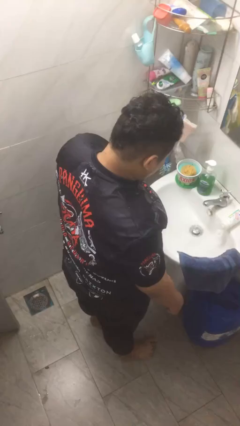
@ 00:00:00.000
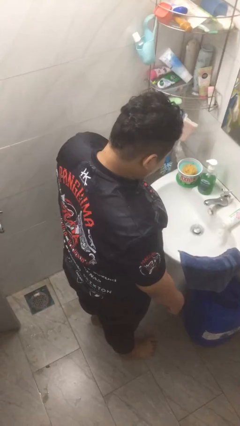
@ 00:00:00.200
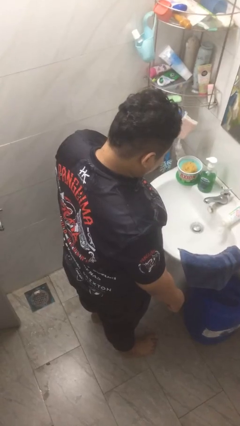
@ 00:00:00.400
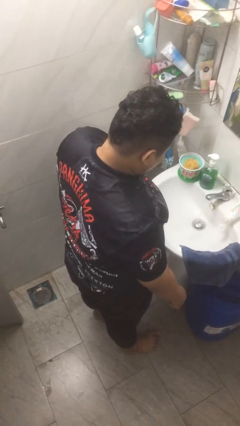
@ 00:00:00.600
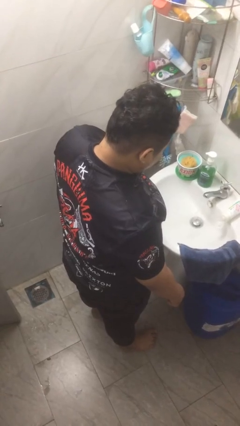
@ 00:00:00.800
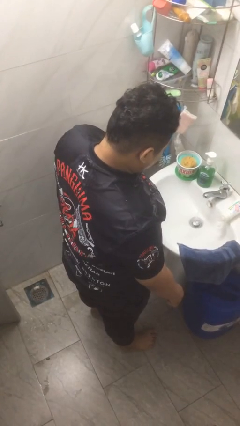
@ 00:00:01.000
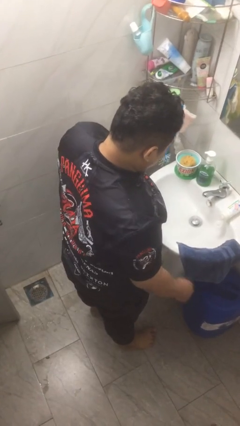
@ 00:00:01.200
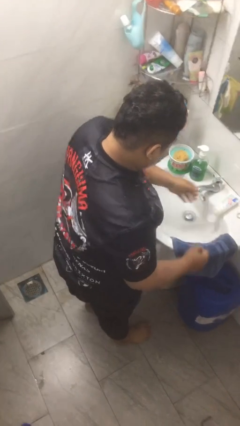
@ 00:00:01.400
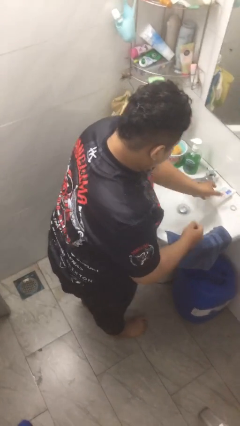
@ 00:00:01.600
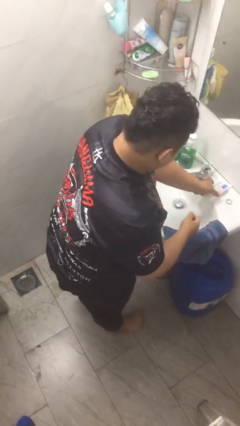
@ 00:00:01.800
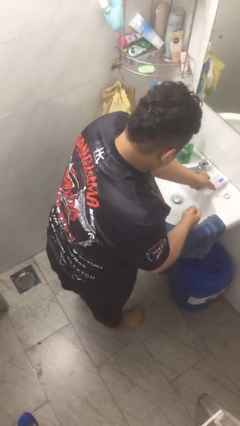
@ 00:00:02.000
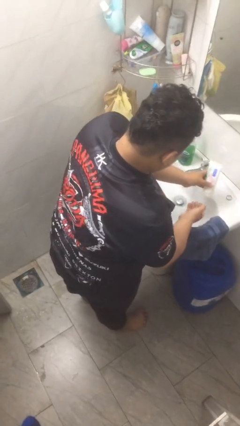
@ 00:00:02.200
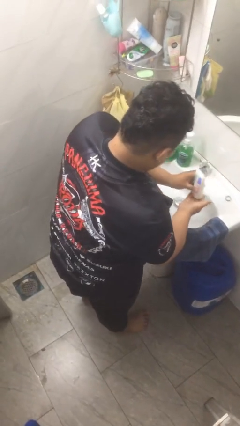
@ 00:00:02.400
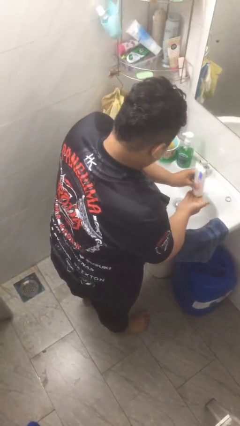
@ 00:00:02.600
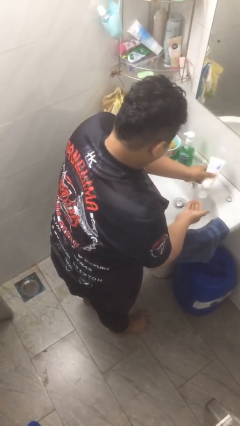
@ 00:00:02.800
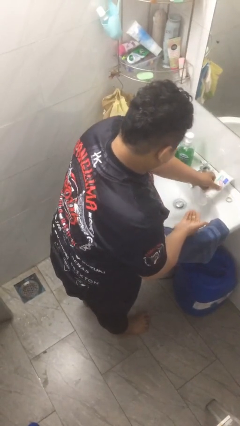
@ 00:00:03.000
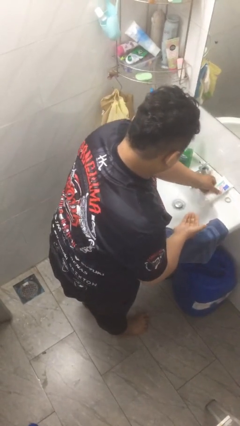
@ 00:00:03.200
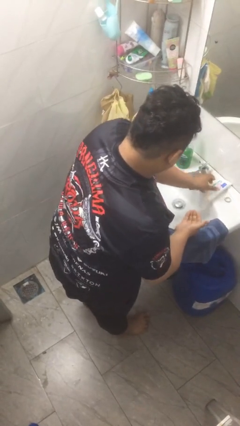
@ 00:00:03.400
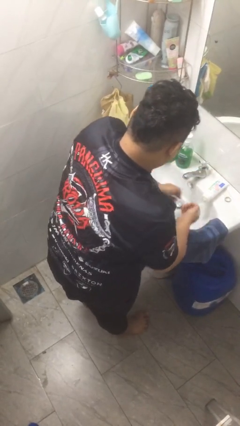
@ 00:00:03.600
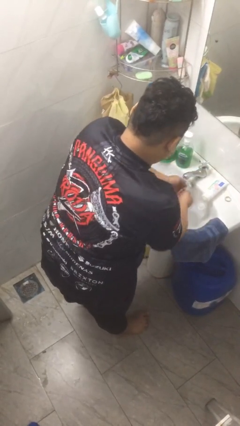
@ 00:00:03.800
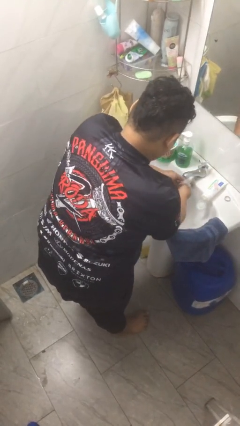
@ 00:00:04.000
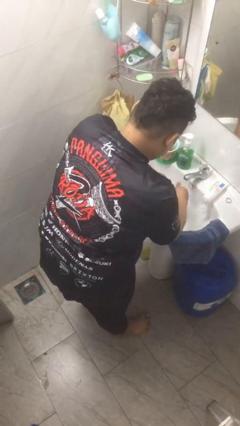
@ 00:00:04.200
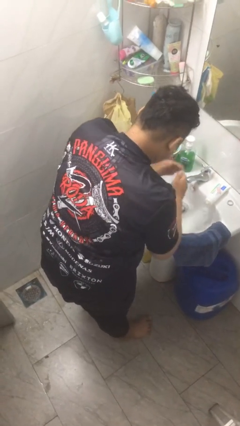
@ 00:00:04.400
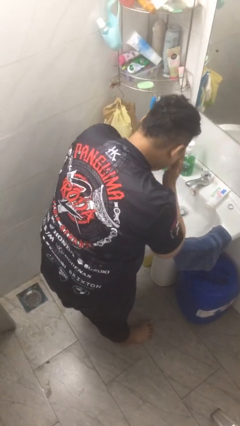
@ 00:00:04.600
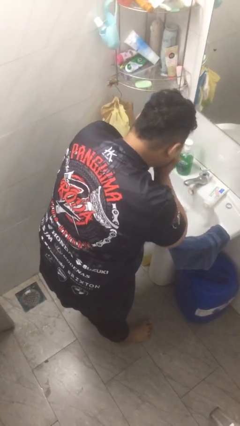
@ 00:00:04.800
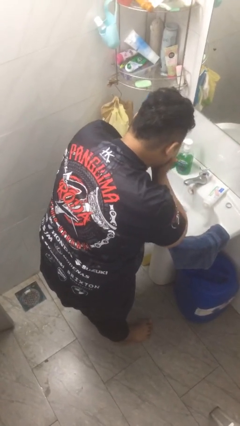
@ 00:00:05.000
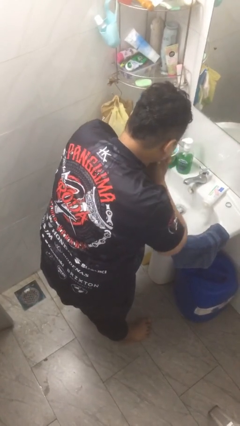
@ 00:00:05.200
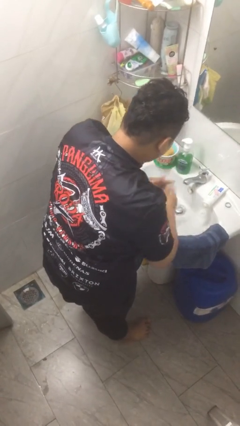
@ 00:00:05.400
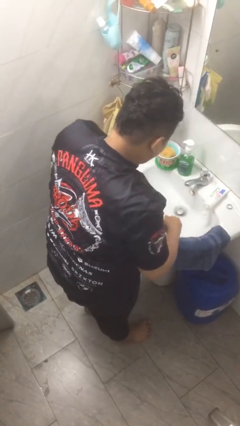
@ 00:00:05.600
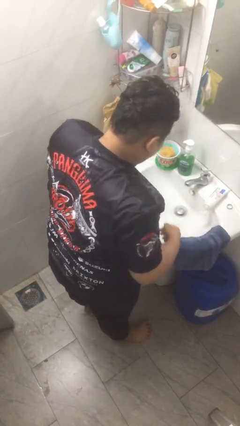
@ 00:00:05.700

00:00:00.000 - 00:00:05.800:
person washes face

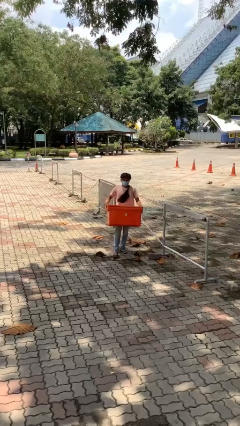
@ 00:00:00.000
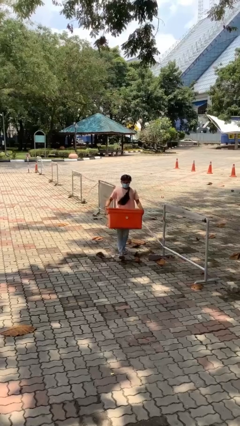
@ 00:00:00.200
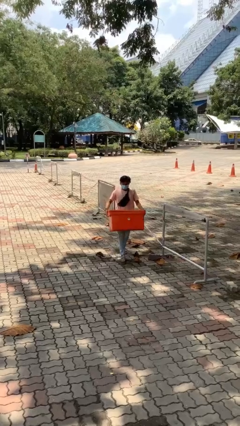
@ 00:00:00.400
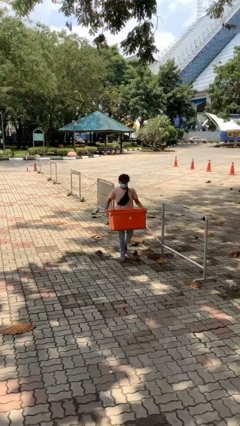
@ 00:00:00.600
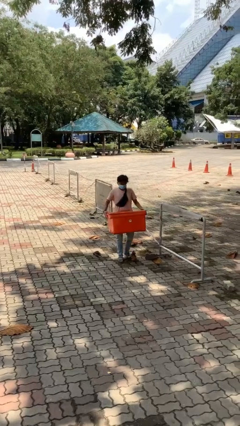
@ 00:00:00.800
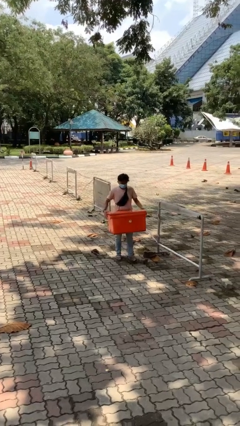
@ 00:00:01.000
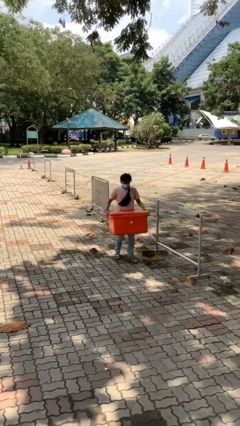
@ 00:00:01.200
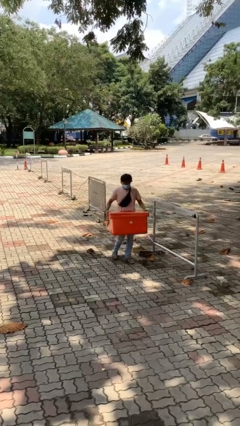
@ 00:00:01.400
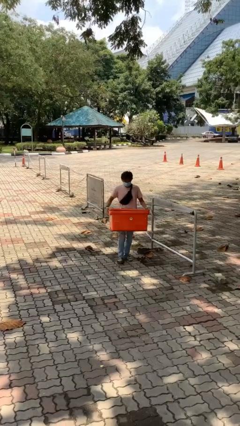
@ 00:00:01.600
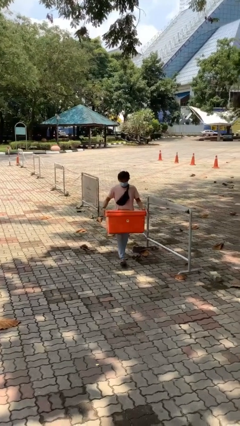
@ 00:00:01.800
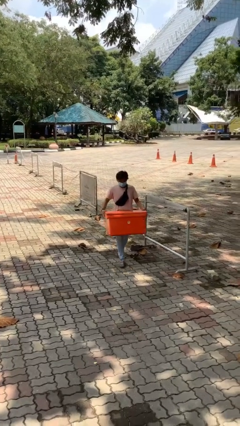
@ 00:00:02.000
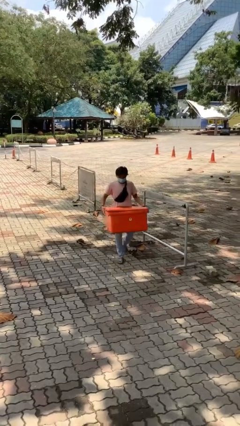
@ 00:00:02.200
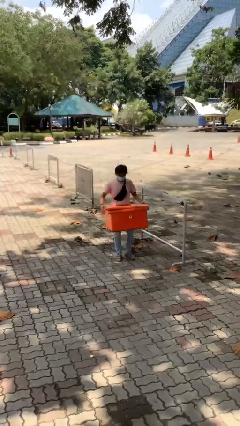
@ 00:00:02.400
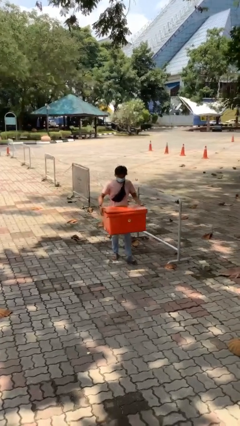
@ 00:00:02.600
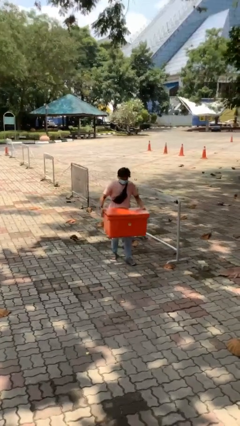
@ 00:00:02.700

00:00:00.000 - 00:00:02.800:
person carries heavy object

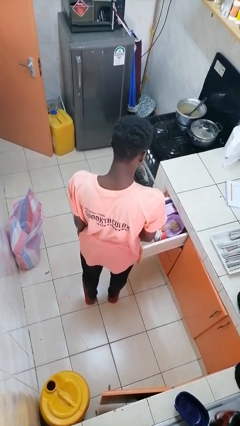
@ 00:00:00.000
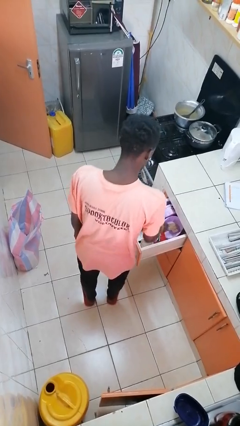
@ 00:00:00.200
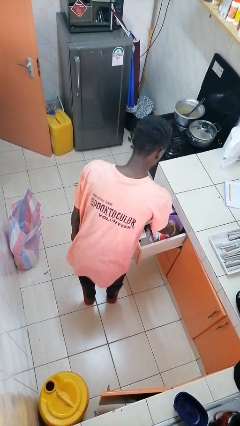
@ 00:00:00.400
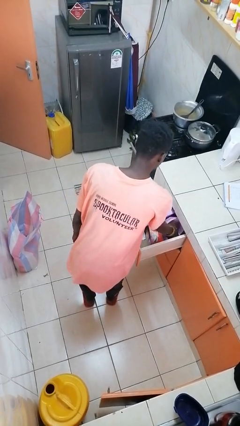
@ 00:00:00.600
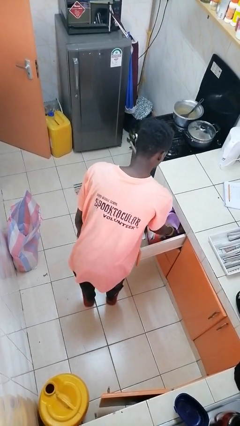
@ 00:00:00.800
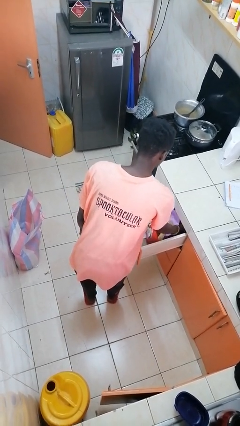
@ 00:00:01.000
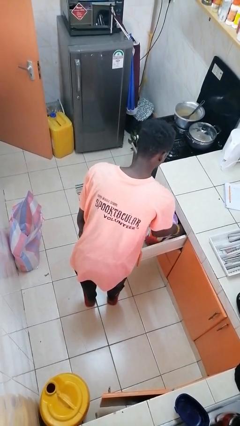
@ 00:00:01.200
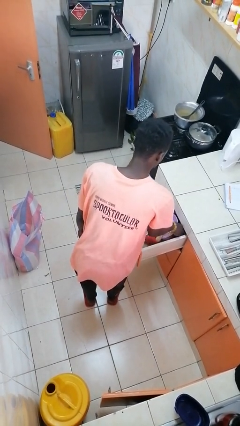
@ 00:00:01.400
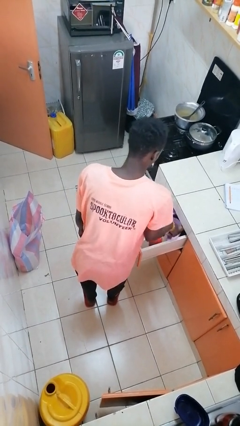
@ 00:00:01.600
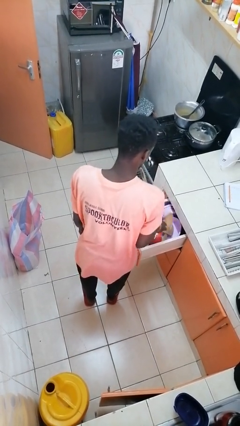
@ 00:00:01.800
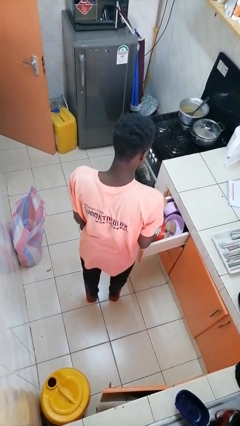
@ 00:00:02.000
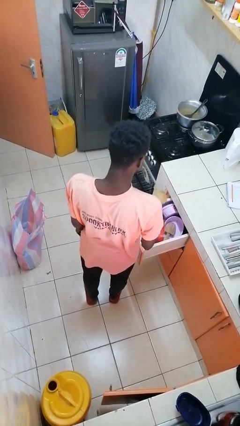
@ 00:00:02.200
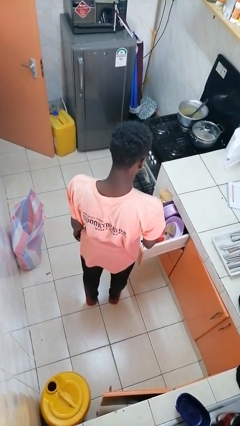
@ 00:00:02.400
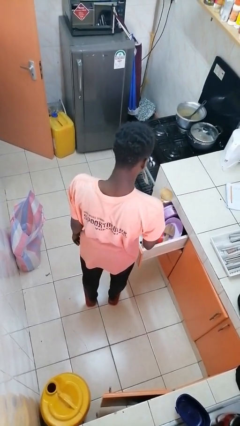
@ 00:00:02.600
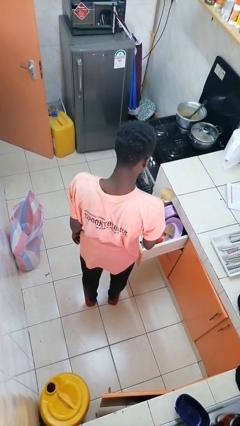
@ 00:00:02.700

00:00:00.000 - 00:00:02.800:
person takes object from kitchen drawer

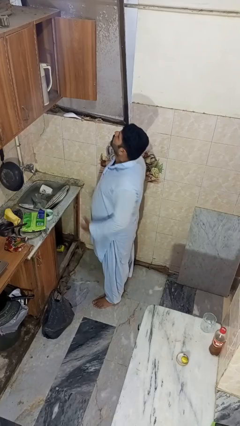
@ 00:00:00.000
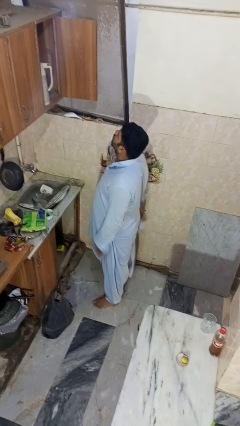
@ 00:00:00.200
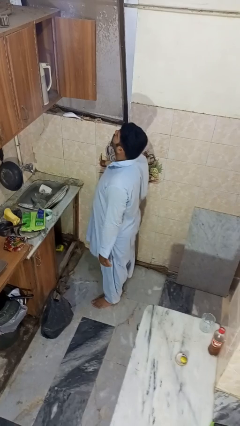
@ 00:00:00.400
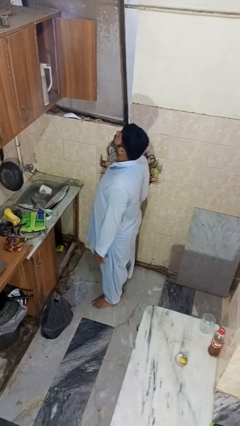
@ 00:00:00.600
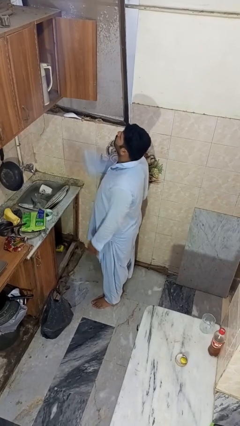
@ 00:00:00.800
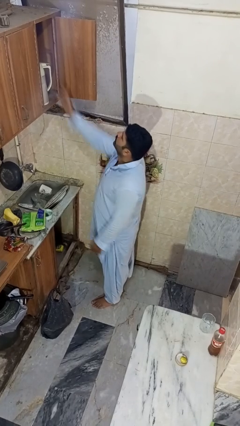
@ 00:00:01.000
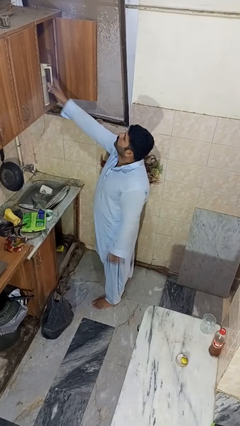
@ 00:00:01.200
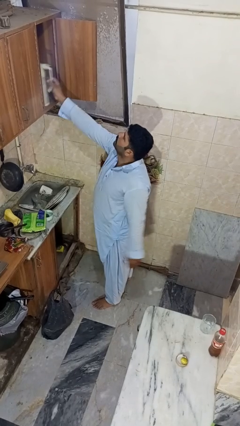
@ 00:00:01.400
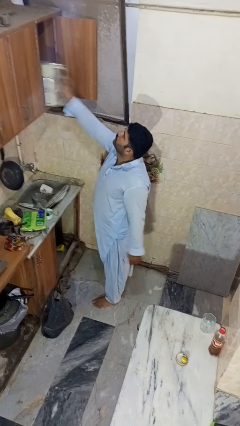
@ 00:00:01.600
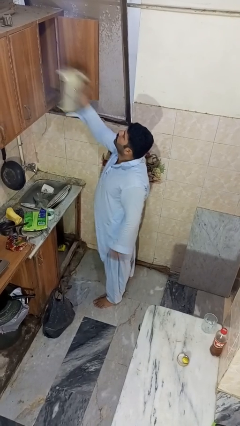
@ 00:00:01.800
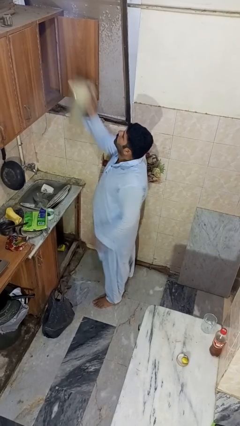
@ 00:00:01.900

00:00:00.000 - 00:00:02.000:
person takes object from cabinet

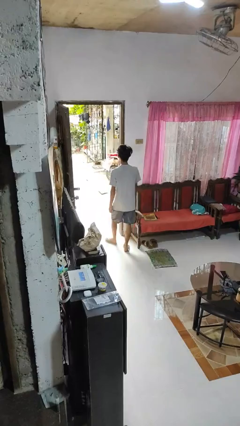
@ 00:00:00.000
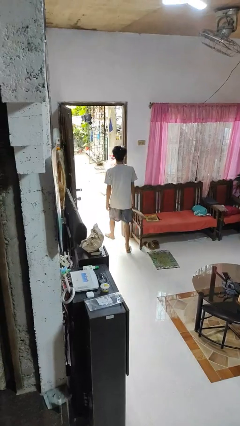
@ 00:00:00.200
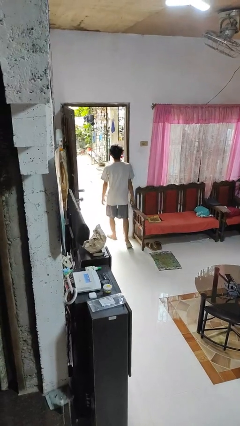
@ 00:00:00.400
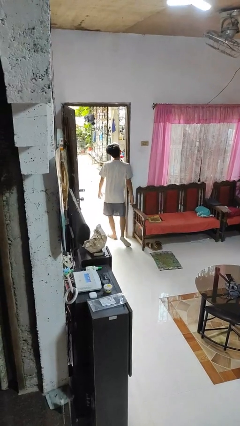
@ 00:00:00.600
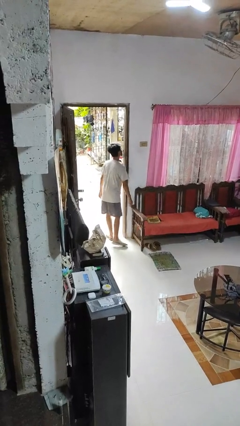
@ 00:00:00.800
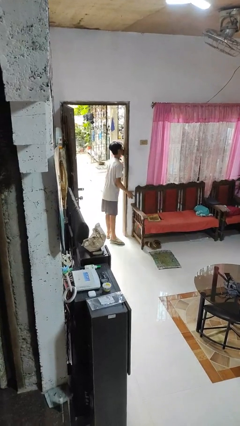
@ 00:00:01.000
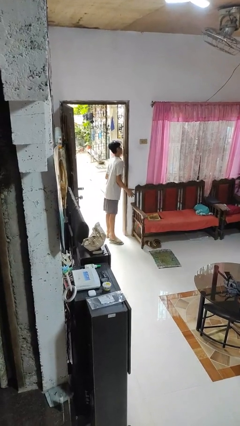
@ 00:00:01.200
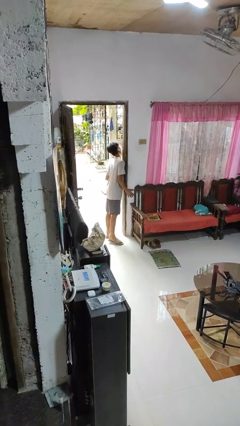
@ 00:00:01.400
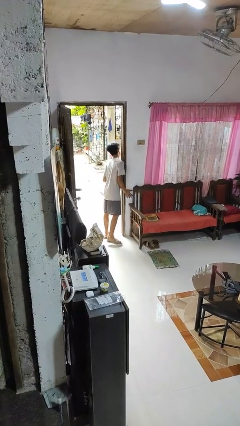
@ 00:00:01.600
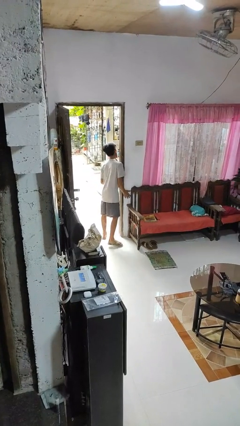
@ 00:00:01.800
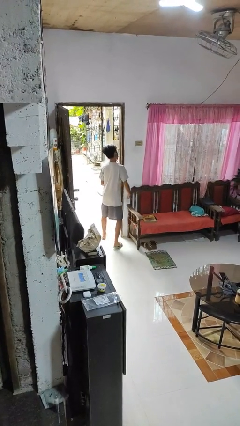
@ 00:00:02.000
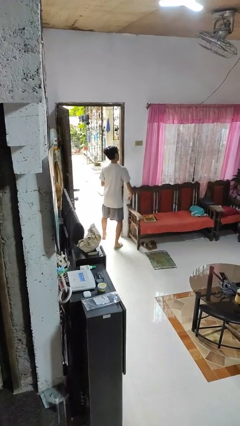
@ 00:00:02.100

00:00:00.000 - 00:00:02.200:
person bumps into wall

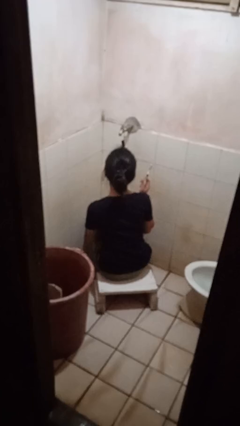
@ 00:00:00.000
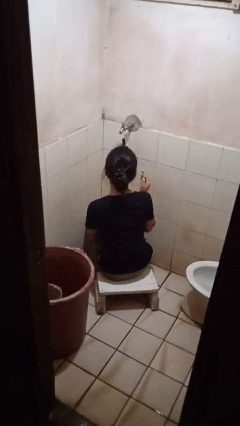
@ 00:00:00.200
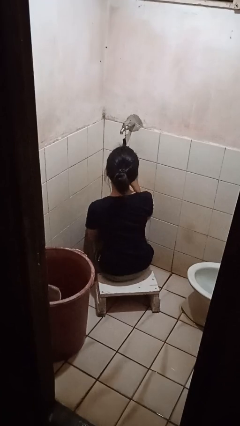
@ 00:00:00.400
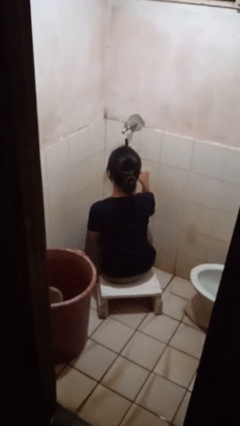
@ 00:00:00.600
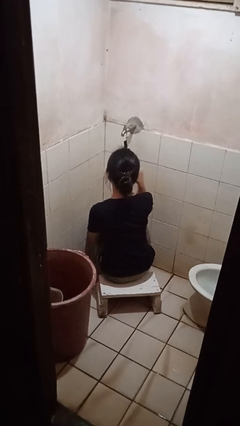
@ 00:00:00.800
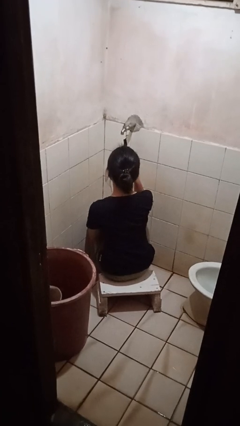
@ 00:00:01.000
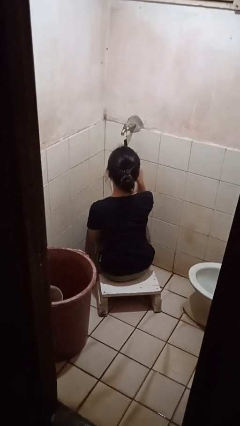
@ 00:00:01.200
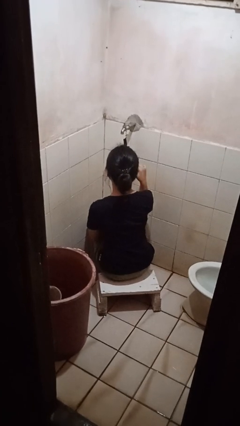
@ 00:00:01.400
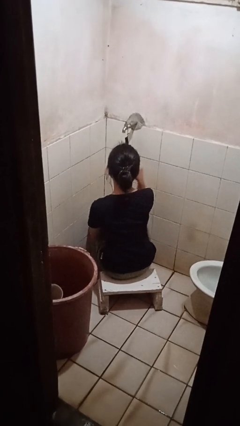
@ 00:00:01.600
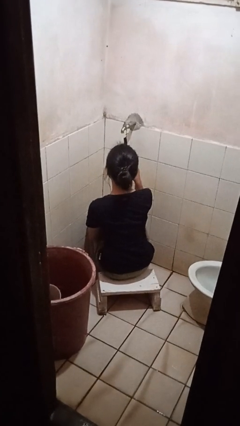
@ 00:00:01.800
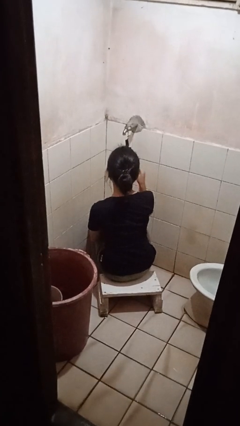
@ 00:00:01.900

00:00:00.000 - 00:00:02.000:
person brushes teeth
